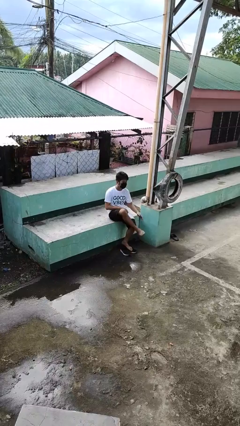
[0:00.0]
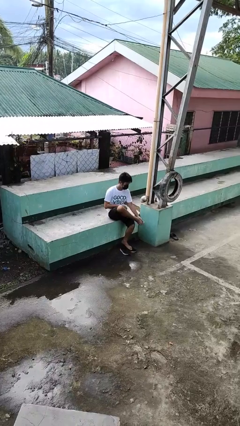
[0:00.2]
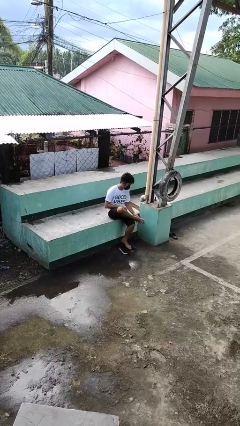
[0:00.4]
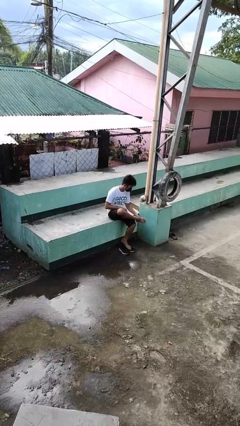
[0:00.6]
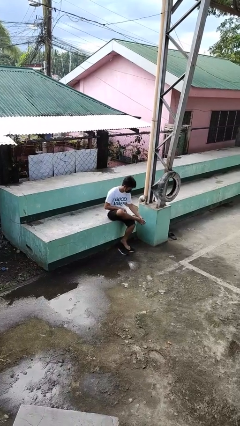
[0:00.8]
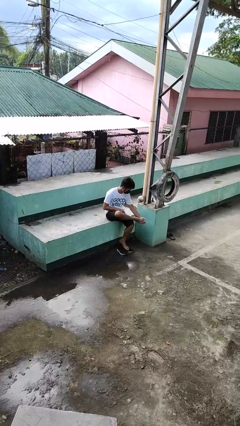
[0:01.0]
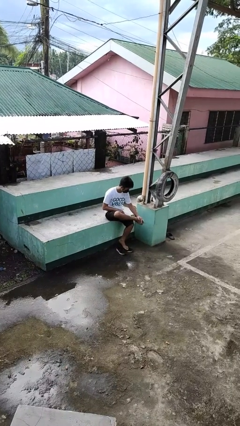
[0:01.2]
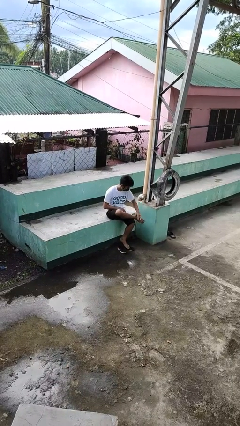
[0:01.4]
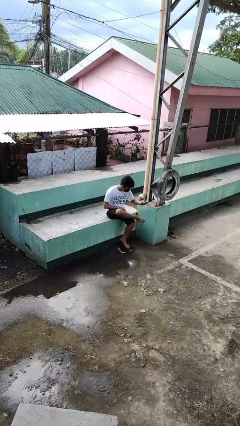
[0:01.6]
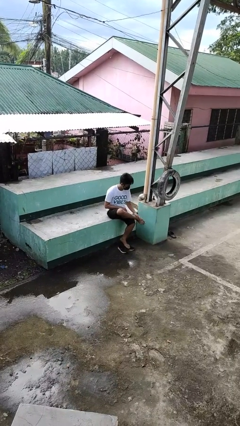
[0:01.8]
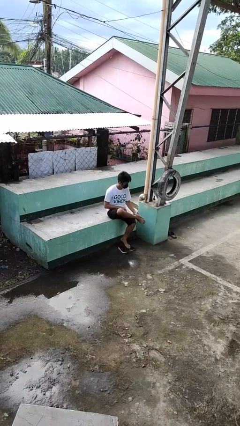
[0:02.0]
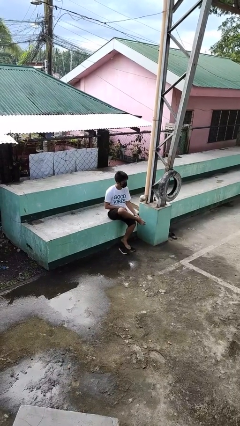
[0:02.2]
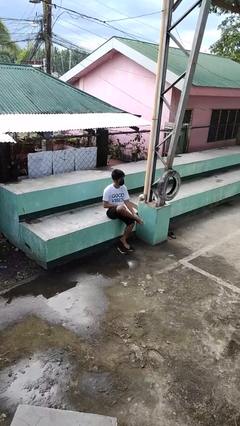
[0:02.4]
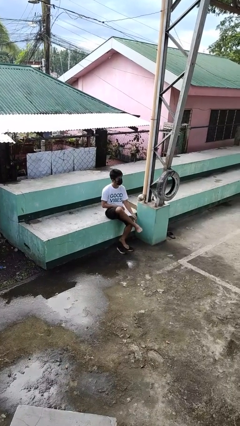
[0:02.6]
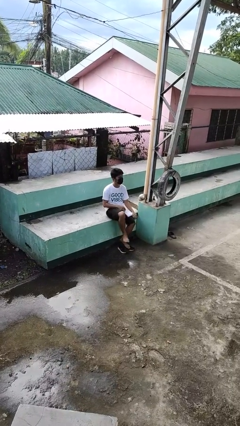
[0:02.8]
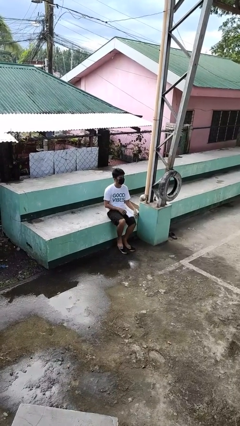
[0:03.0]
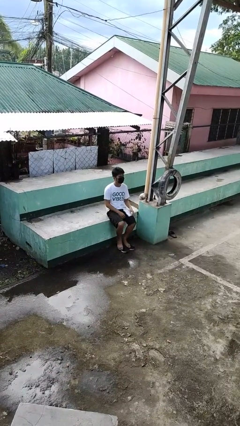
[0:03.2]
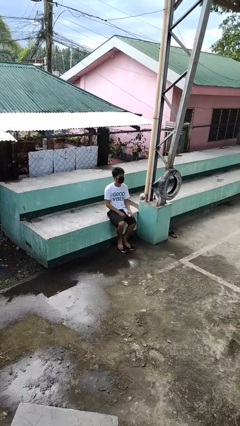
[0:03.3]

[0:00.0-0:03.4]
person rubs foot

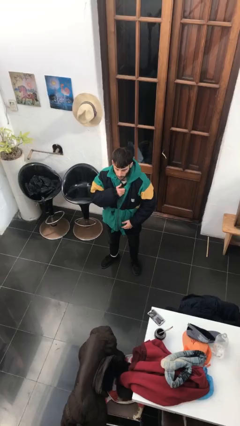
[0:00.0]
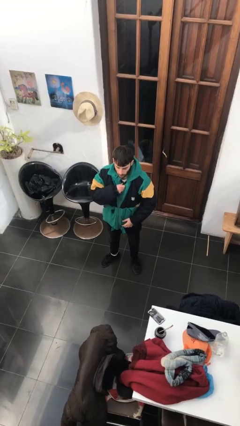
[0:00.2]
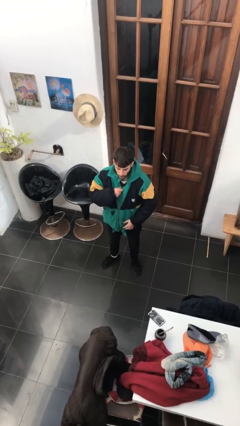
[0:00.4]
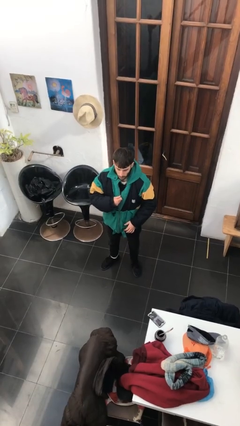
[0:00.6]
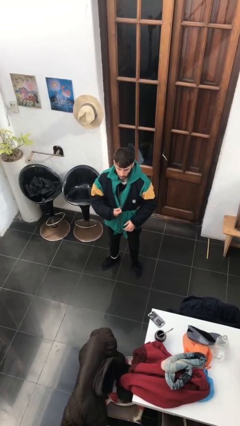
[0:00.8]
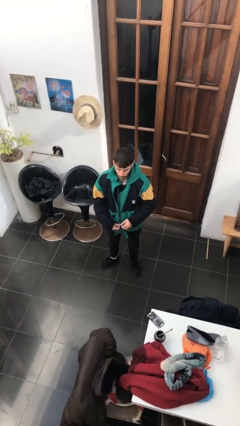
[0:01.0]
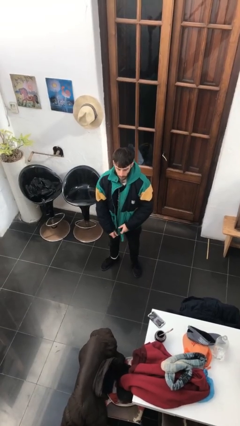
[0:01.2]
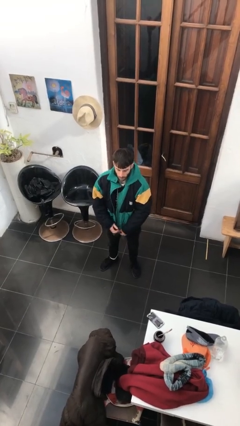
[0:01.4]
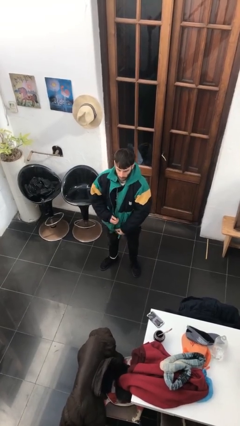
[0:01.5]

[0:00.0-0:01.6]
person unzips jacket

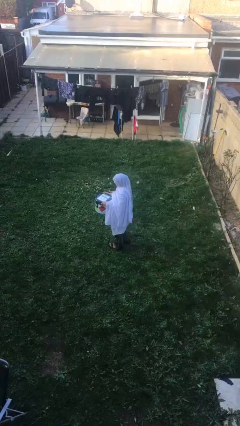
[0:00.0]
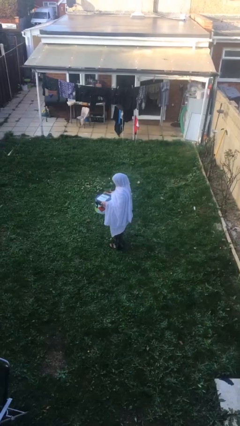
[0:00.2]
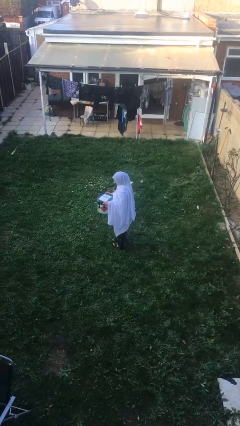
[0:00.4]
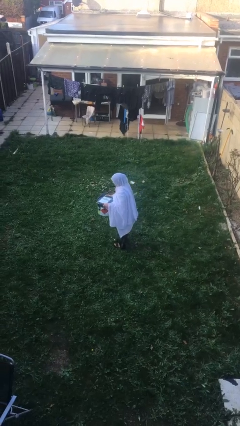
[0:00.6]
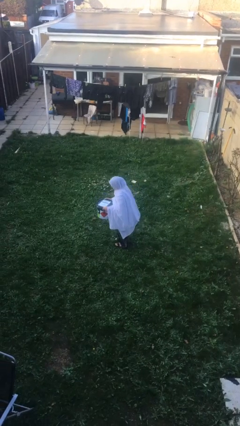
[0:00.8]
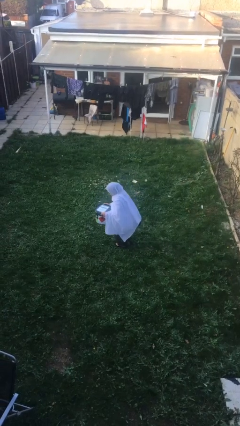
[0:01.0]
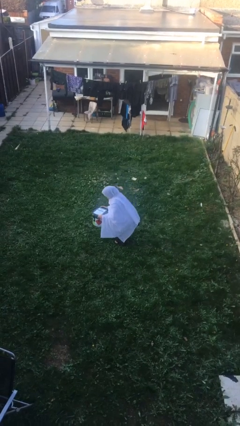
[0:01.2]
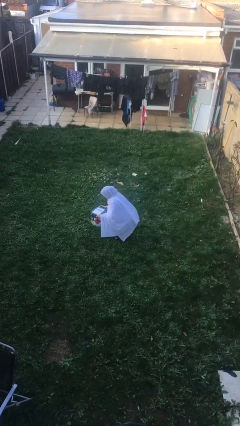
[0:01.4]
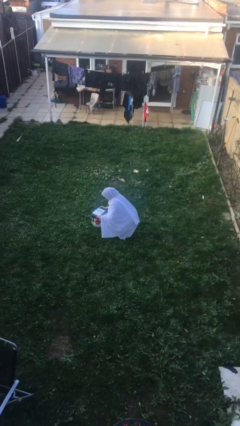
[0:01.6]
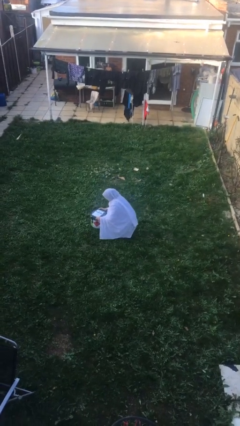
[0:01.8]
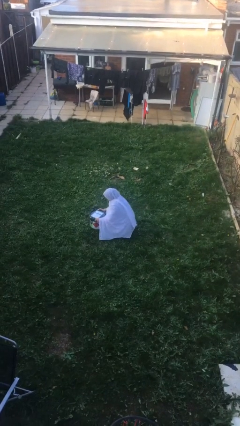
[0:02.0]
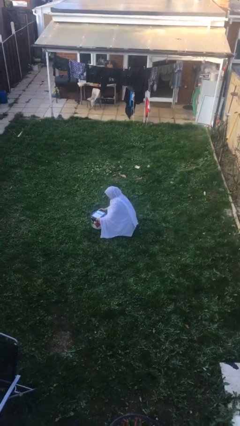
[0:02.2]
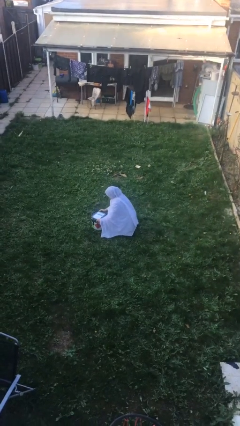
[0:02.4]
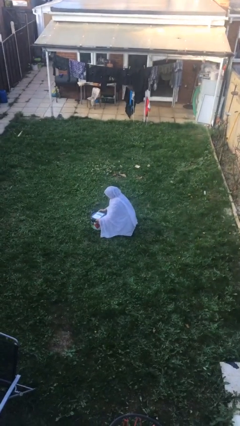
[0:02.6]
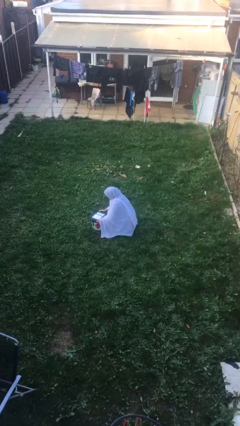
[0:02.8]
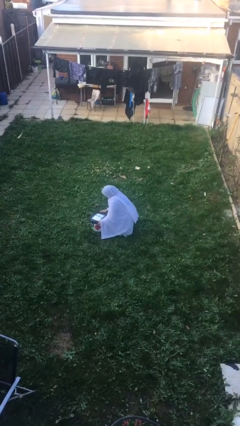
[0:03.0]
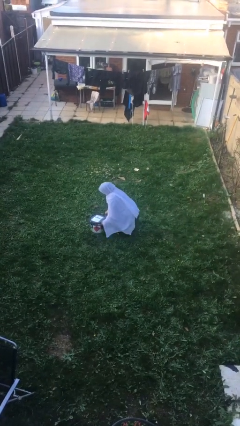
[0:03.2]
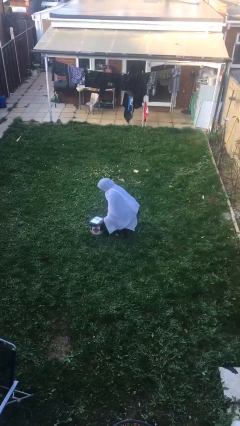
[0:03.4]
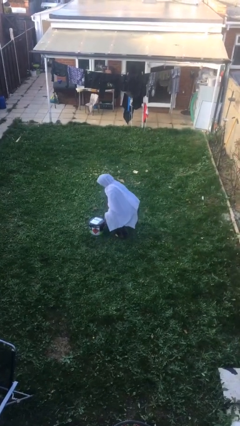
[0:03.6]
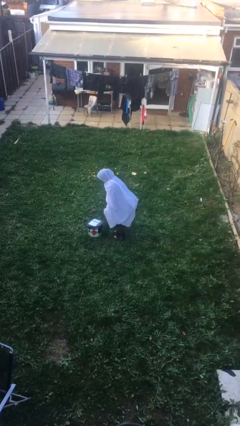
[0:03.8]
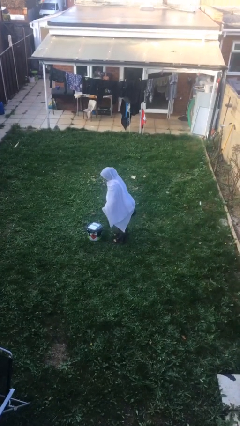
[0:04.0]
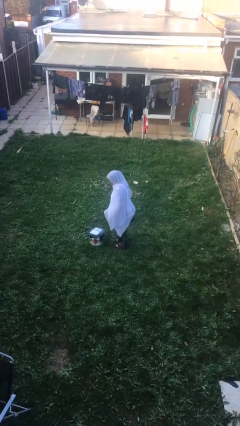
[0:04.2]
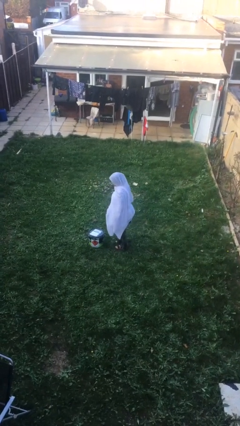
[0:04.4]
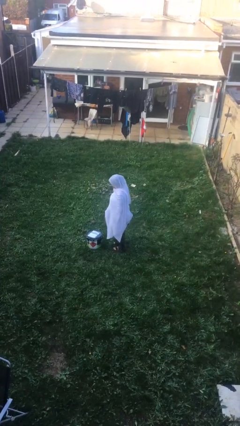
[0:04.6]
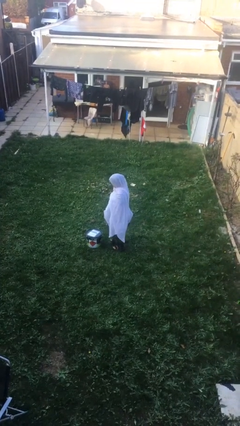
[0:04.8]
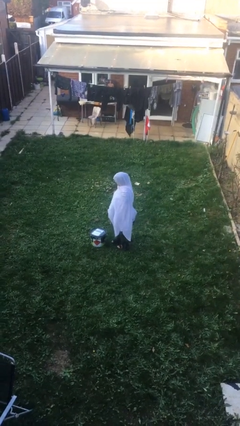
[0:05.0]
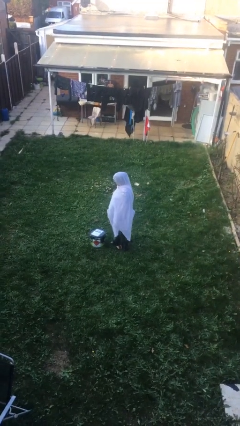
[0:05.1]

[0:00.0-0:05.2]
person puts down object on floor

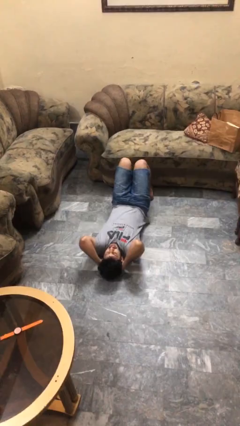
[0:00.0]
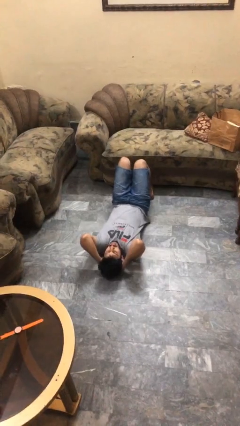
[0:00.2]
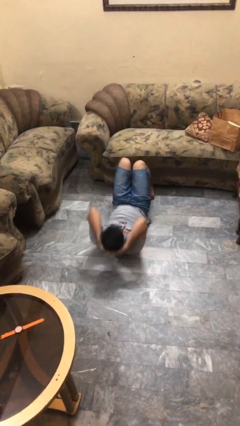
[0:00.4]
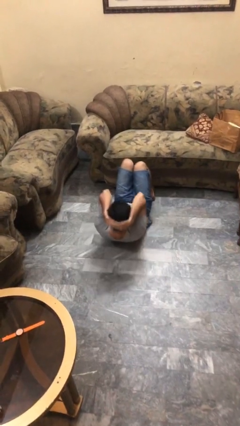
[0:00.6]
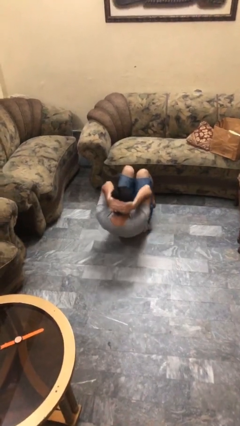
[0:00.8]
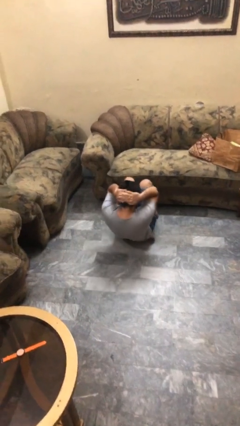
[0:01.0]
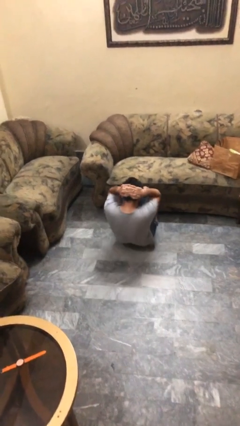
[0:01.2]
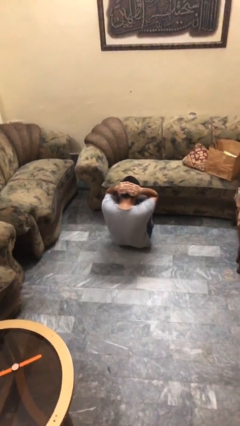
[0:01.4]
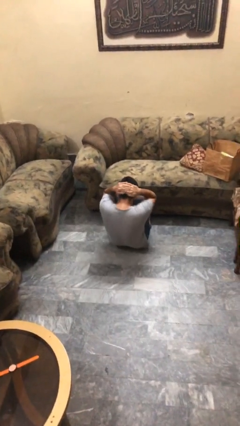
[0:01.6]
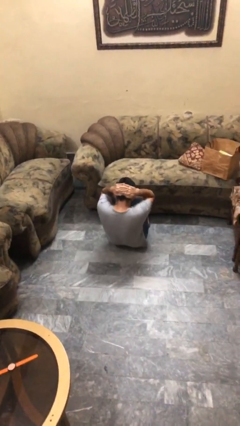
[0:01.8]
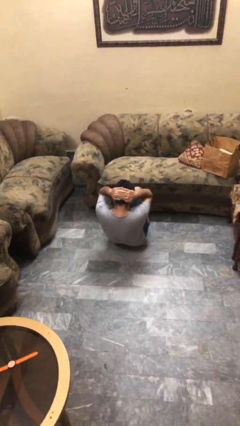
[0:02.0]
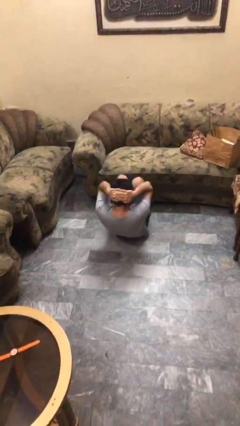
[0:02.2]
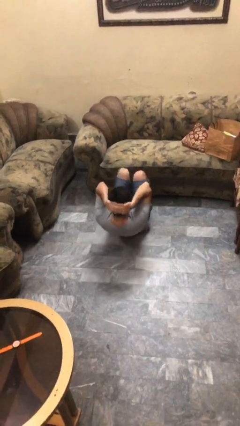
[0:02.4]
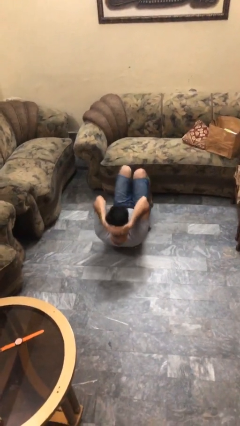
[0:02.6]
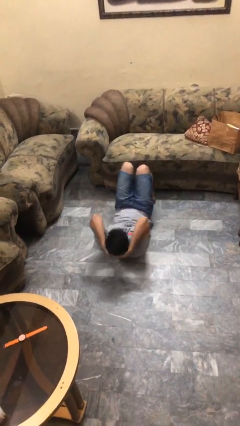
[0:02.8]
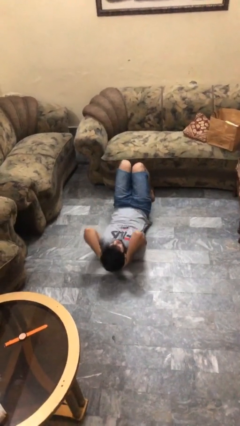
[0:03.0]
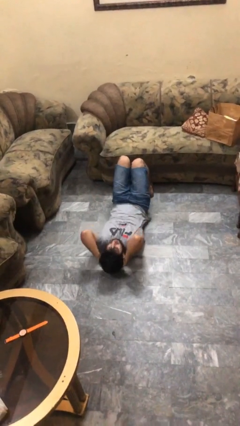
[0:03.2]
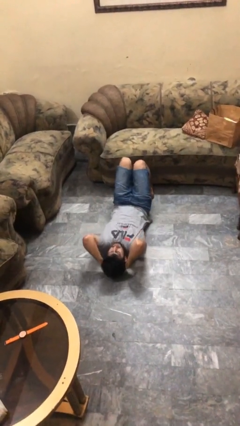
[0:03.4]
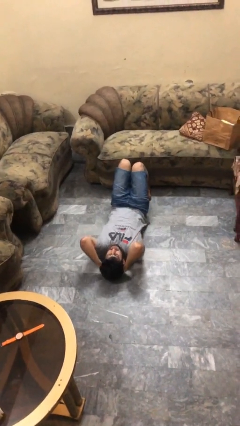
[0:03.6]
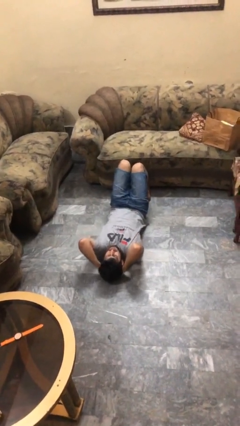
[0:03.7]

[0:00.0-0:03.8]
person exercises with situp

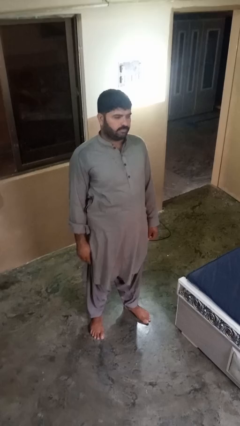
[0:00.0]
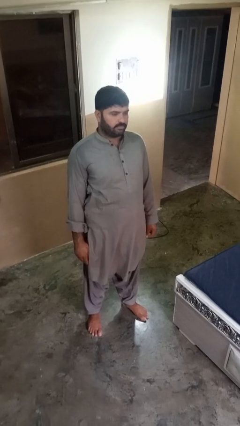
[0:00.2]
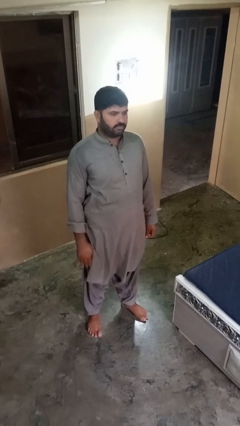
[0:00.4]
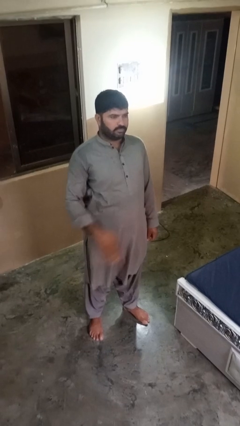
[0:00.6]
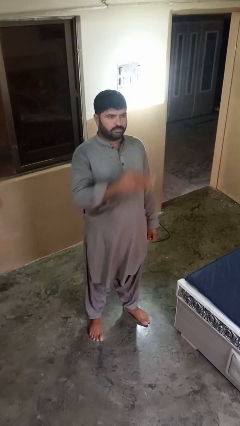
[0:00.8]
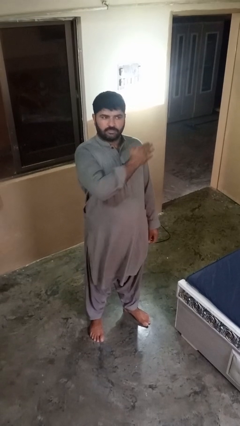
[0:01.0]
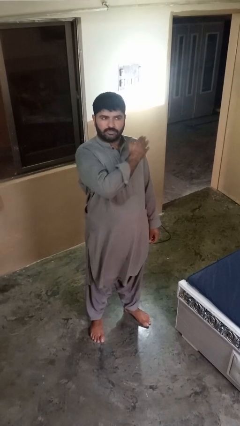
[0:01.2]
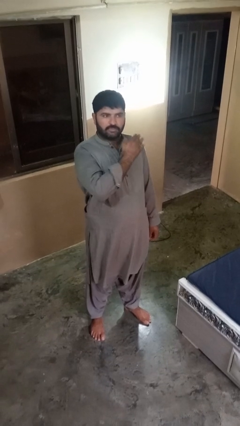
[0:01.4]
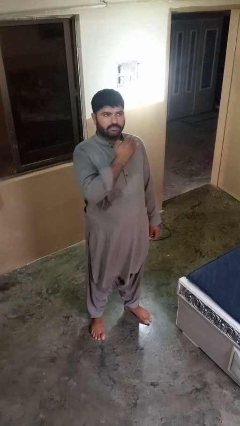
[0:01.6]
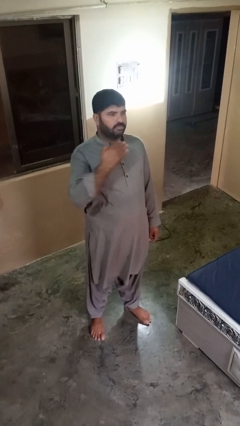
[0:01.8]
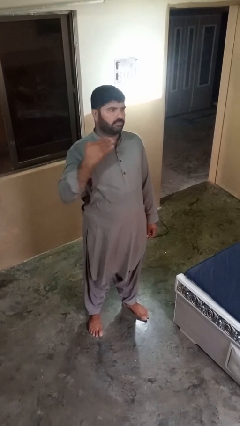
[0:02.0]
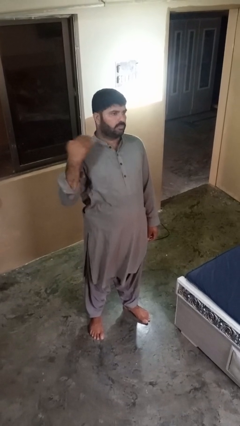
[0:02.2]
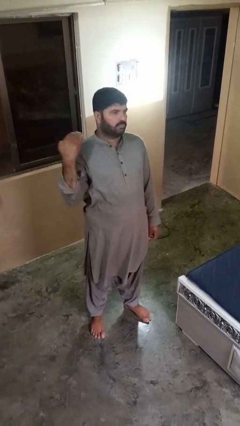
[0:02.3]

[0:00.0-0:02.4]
person gestures cut

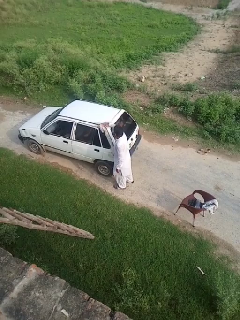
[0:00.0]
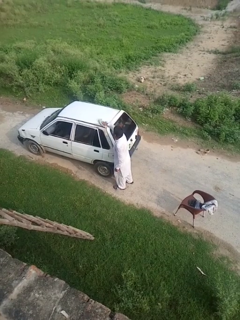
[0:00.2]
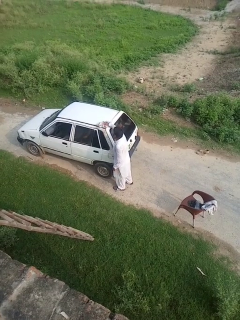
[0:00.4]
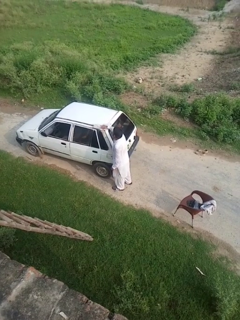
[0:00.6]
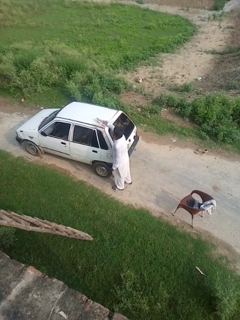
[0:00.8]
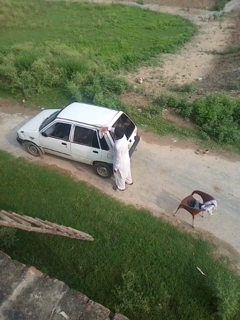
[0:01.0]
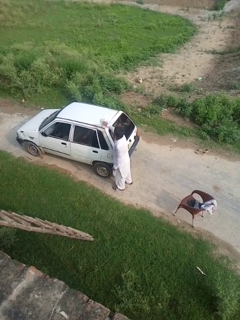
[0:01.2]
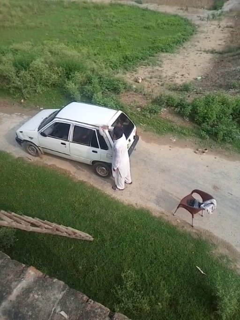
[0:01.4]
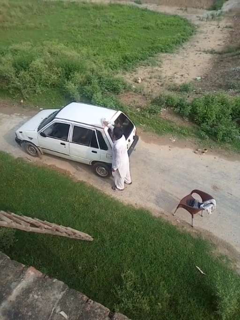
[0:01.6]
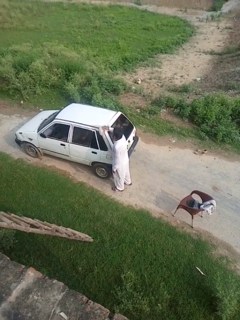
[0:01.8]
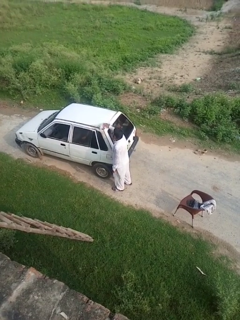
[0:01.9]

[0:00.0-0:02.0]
person polishes car with rag
